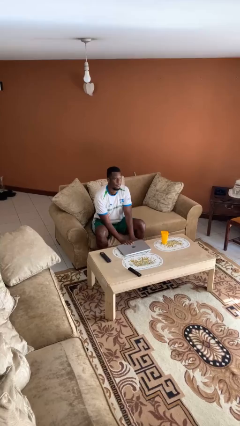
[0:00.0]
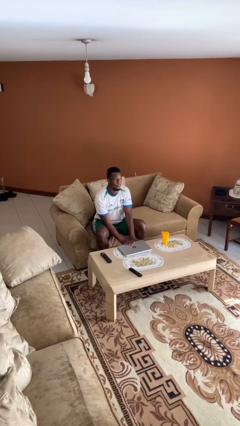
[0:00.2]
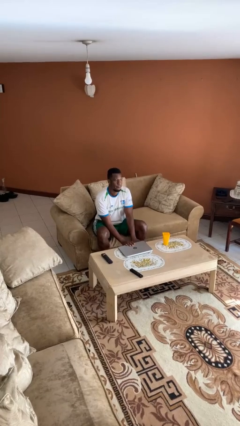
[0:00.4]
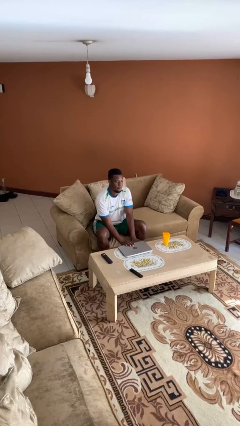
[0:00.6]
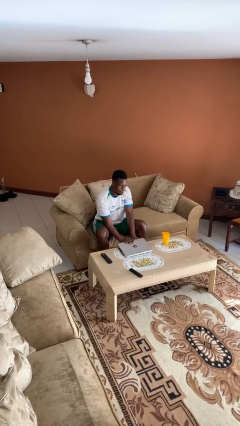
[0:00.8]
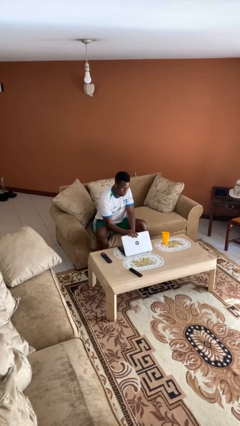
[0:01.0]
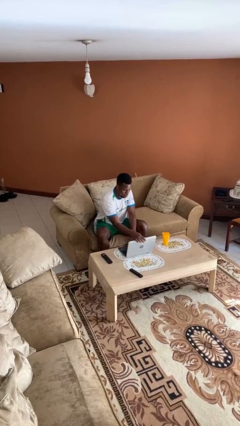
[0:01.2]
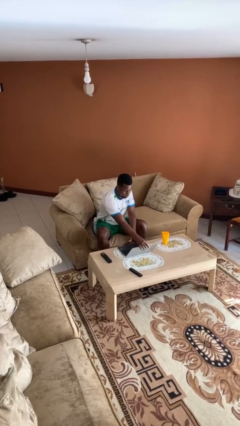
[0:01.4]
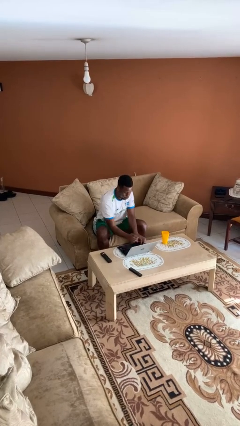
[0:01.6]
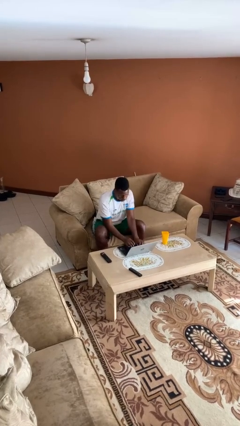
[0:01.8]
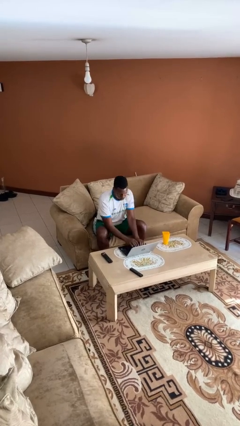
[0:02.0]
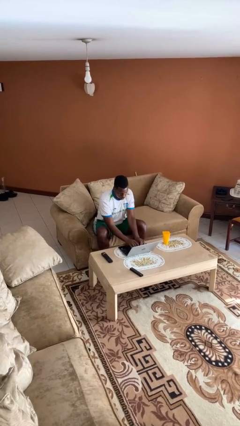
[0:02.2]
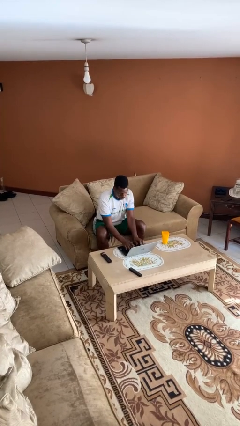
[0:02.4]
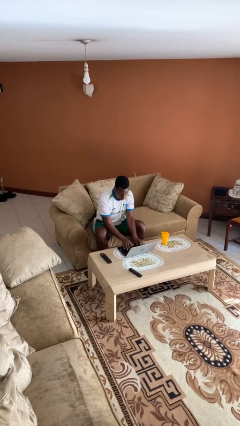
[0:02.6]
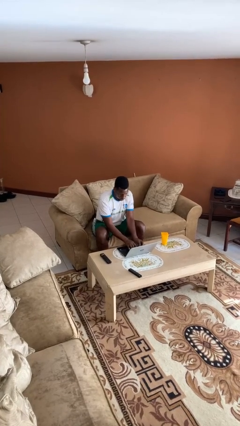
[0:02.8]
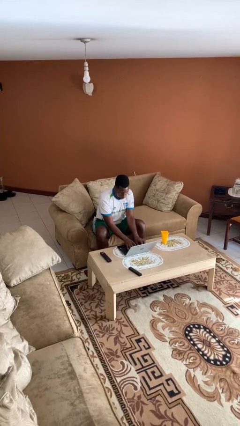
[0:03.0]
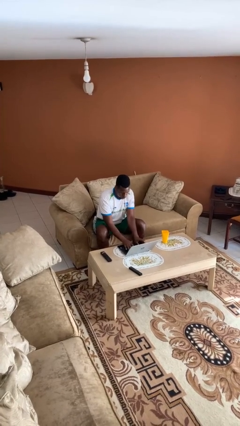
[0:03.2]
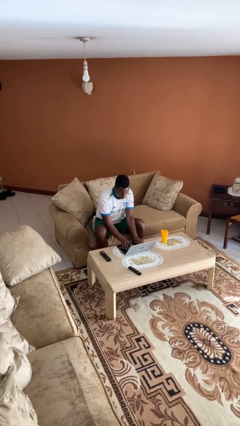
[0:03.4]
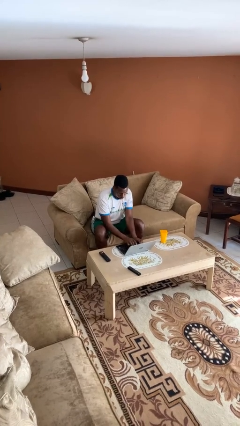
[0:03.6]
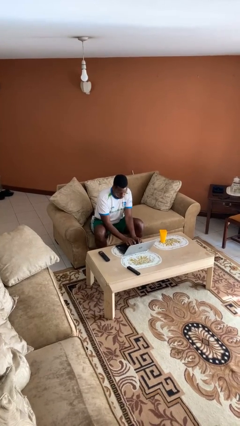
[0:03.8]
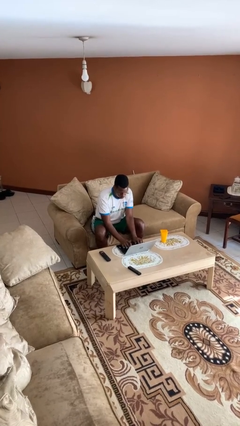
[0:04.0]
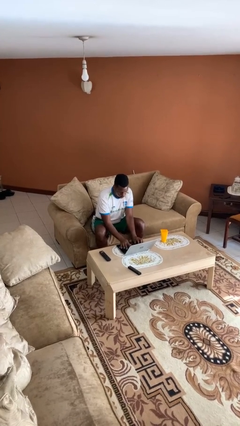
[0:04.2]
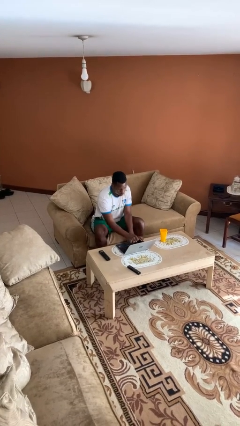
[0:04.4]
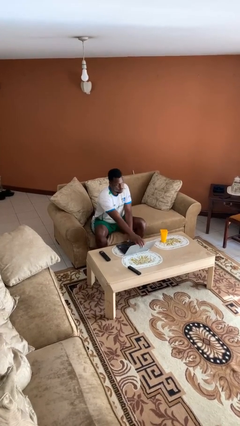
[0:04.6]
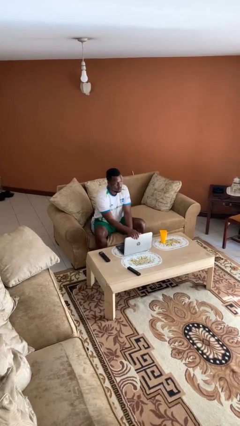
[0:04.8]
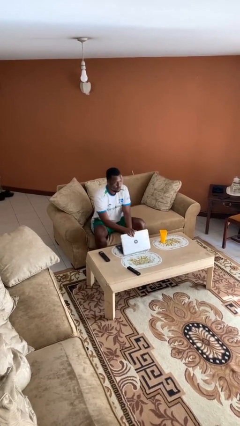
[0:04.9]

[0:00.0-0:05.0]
person interacts with laptop

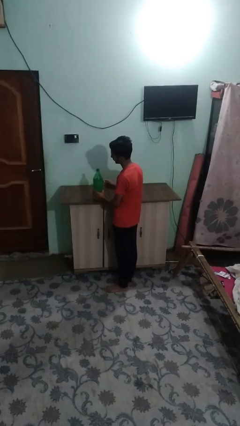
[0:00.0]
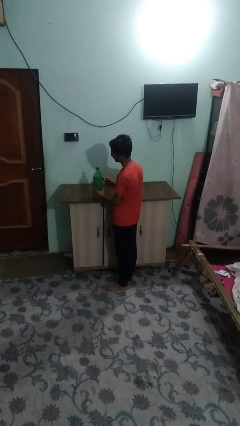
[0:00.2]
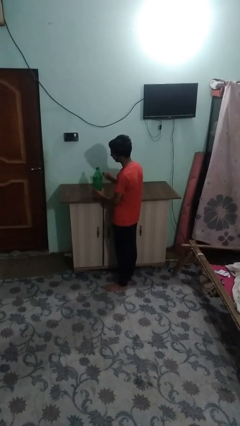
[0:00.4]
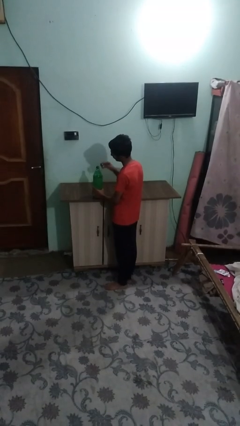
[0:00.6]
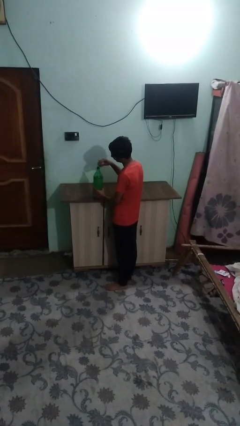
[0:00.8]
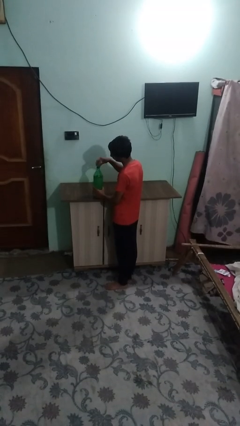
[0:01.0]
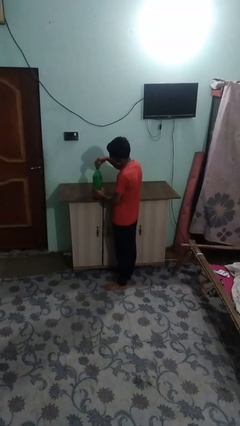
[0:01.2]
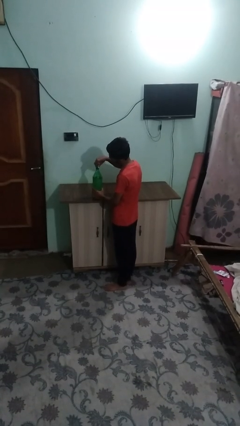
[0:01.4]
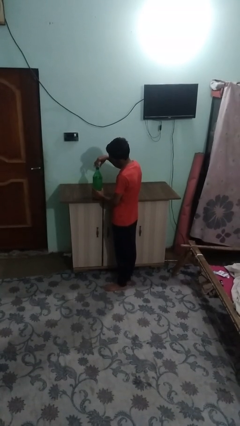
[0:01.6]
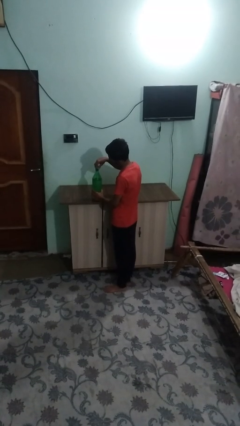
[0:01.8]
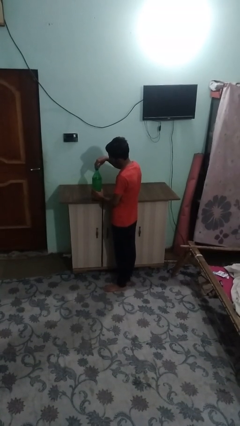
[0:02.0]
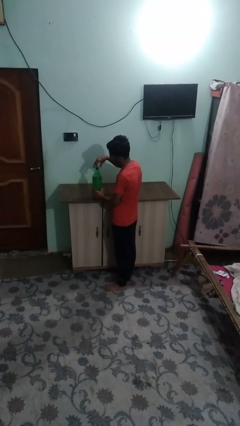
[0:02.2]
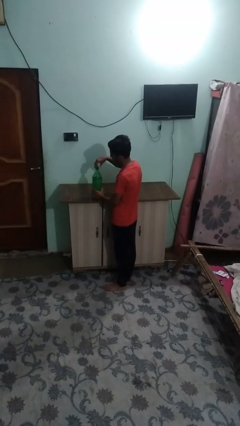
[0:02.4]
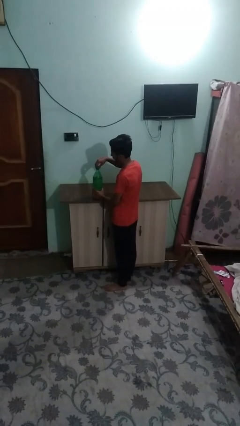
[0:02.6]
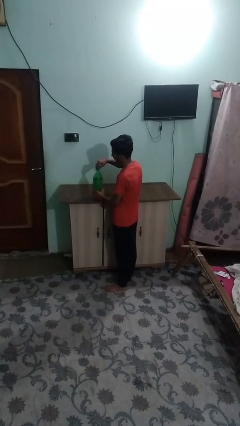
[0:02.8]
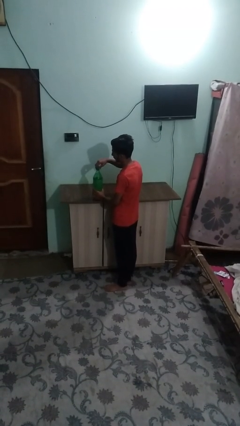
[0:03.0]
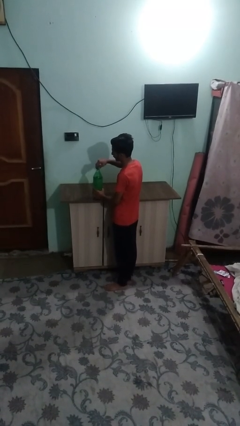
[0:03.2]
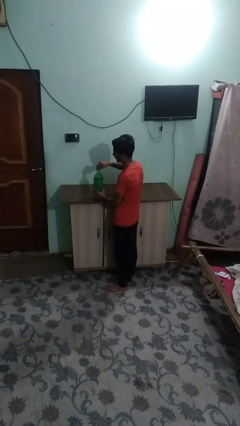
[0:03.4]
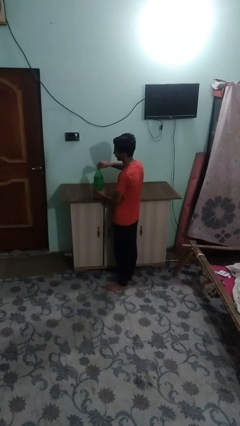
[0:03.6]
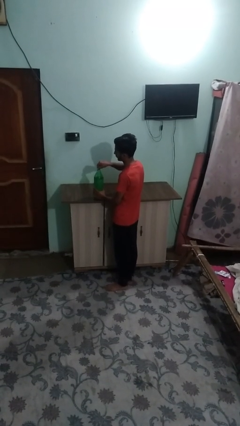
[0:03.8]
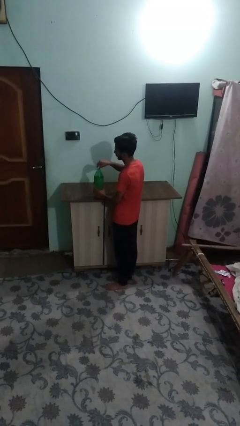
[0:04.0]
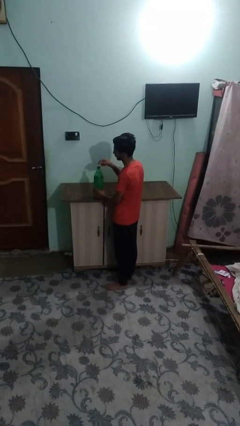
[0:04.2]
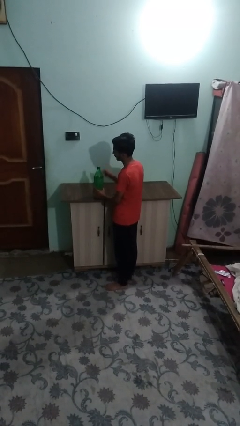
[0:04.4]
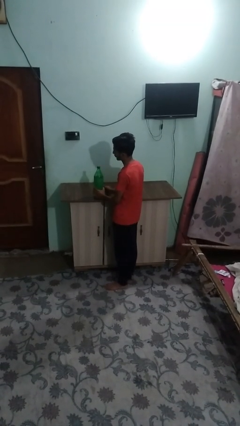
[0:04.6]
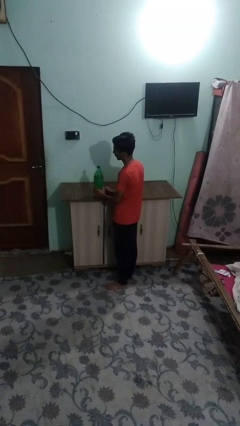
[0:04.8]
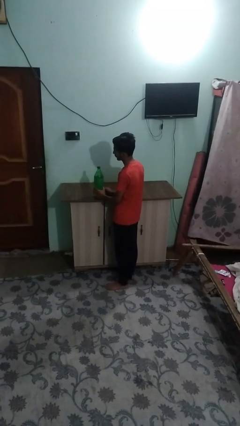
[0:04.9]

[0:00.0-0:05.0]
person screws lid to bottle

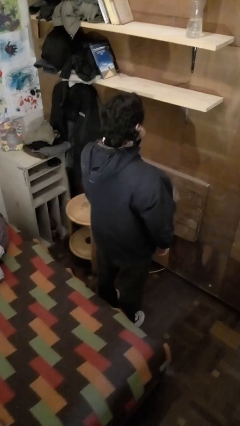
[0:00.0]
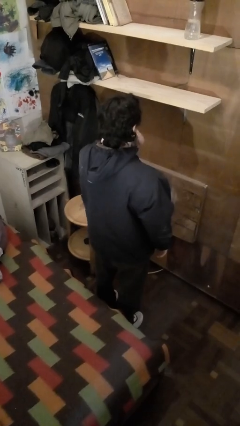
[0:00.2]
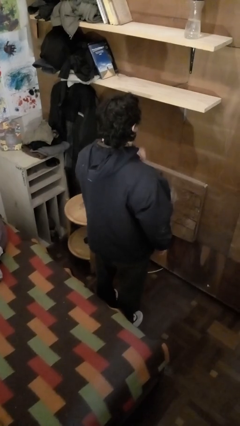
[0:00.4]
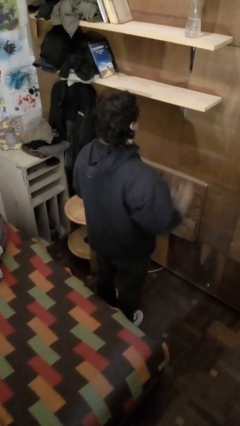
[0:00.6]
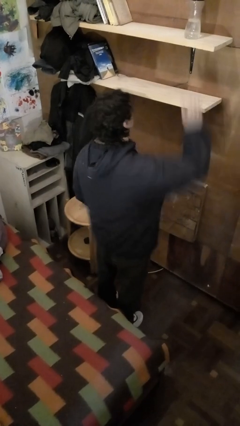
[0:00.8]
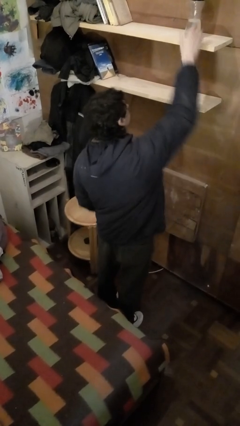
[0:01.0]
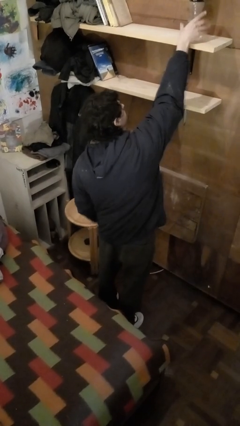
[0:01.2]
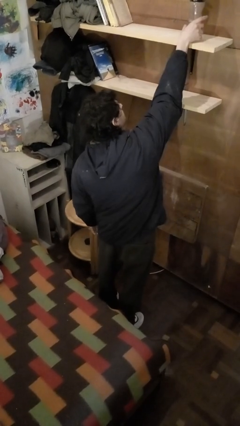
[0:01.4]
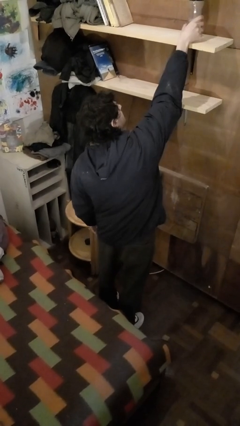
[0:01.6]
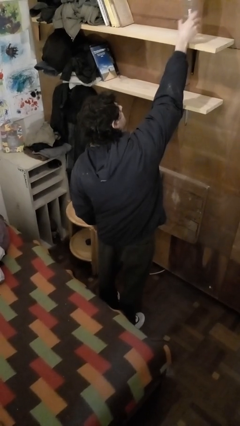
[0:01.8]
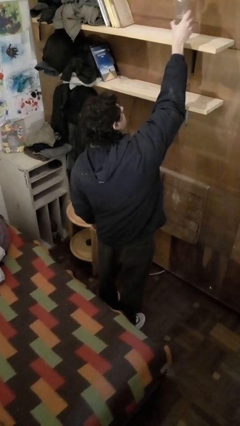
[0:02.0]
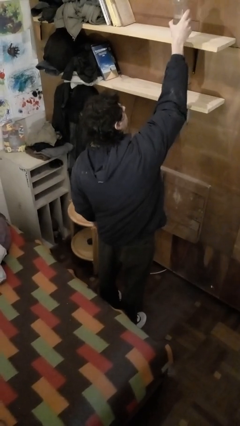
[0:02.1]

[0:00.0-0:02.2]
person picks up object from shelf

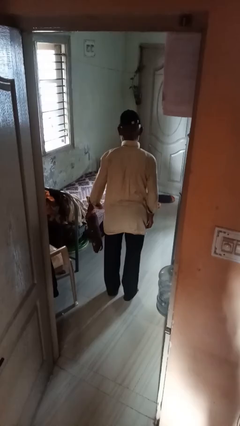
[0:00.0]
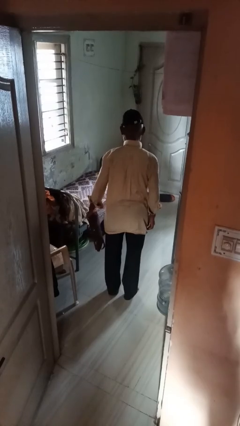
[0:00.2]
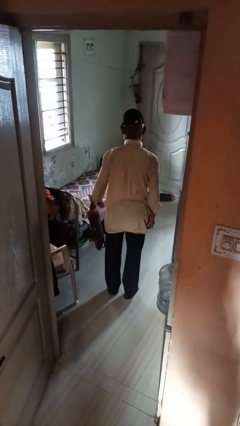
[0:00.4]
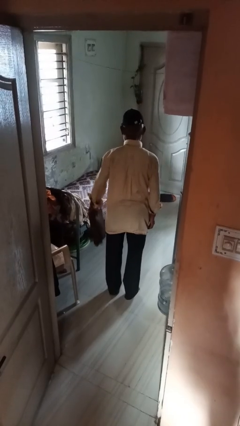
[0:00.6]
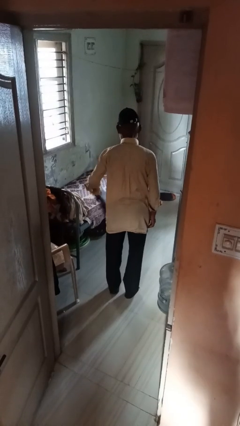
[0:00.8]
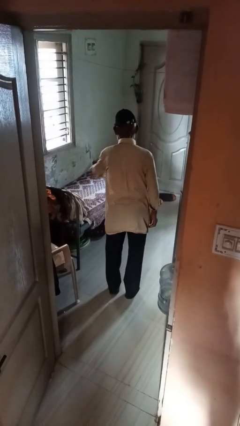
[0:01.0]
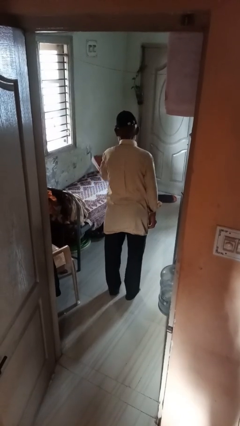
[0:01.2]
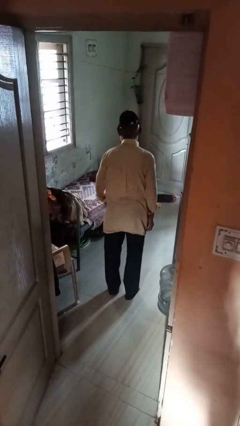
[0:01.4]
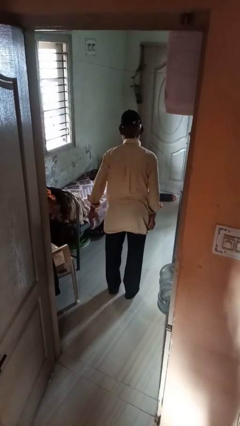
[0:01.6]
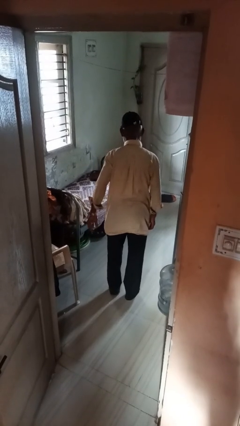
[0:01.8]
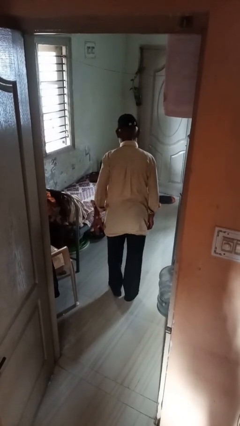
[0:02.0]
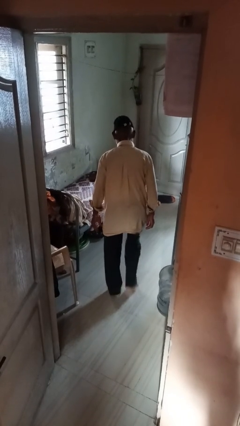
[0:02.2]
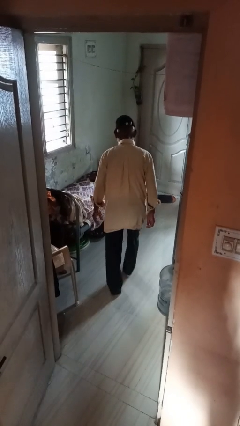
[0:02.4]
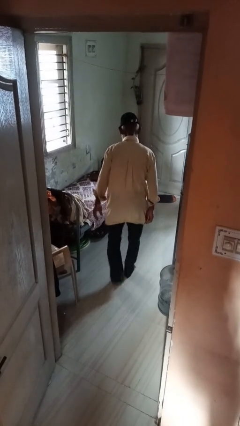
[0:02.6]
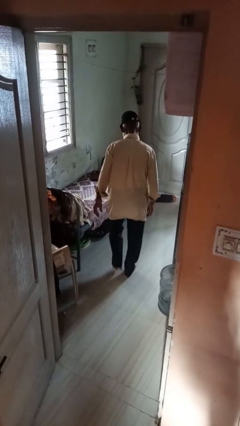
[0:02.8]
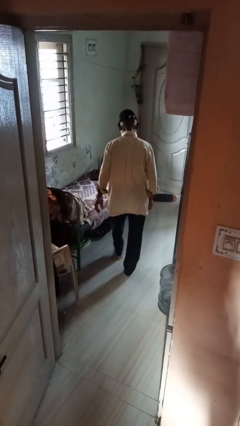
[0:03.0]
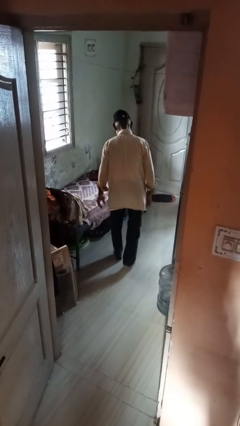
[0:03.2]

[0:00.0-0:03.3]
person throws object on bed

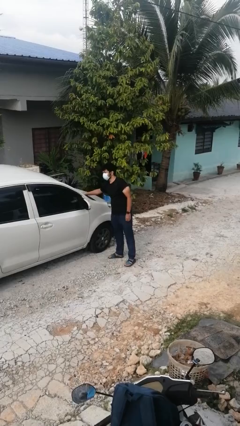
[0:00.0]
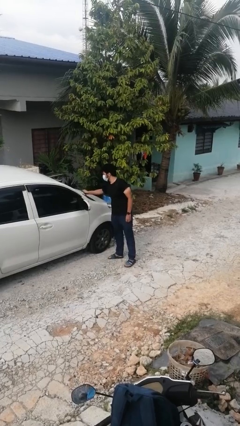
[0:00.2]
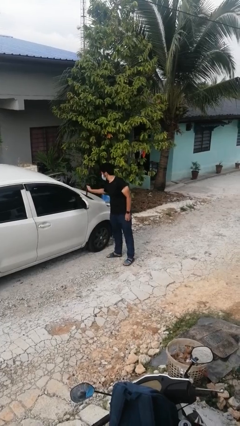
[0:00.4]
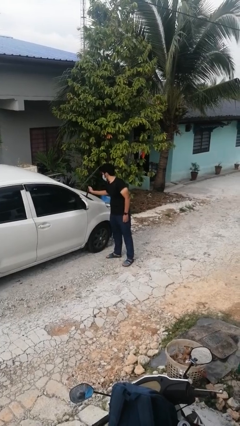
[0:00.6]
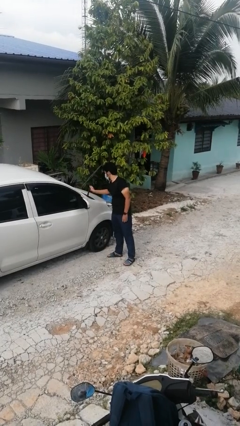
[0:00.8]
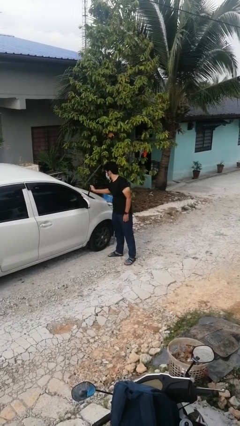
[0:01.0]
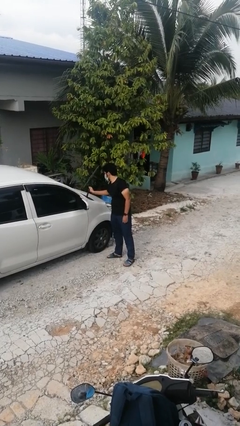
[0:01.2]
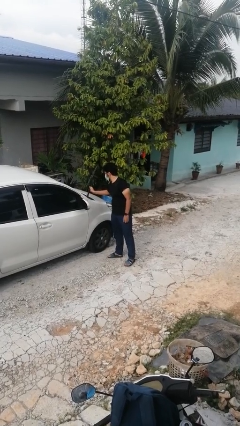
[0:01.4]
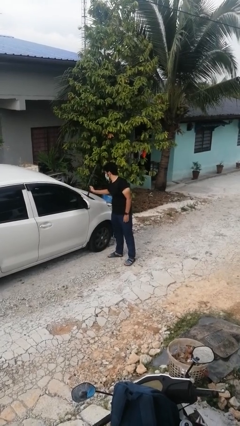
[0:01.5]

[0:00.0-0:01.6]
person flips up car wipers

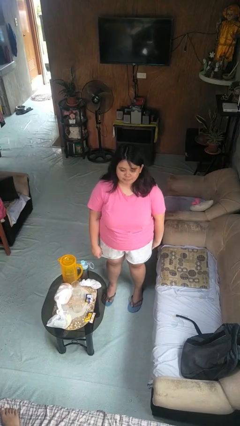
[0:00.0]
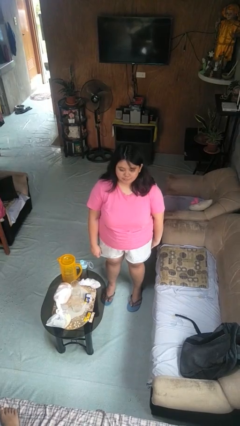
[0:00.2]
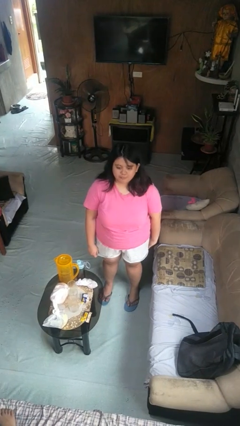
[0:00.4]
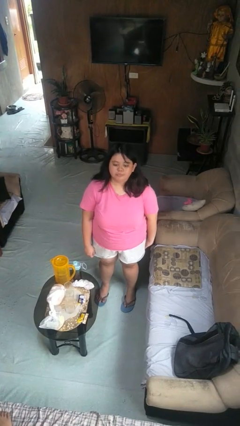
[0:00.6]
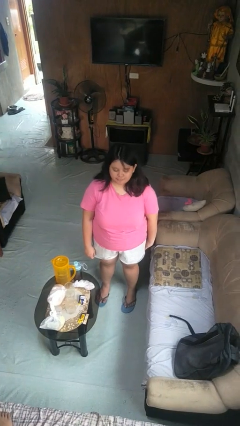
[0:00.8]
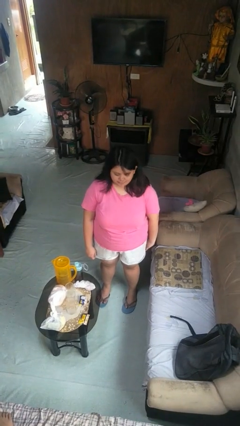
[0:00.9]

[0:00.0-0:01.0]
person nods head
